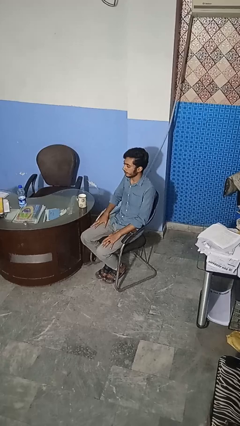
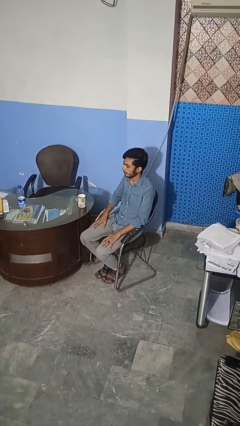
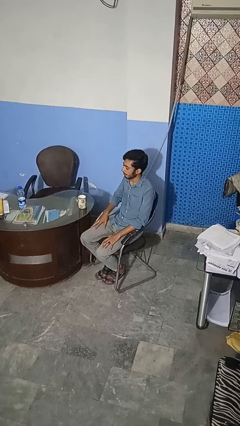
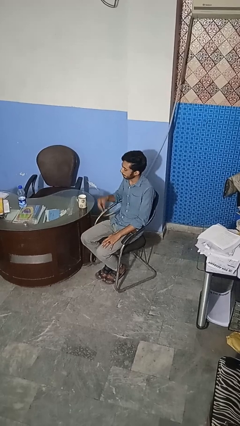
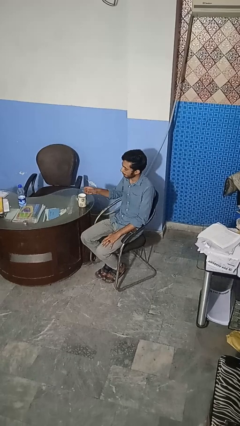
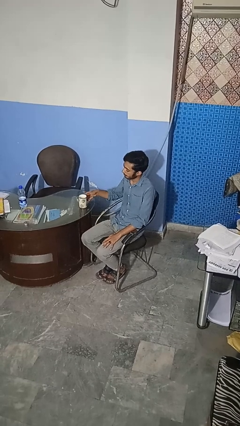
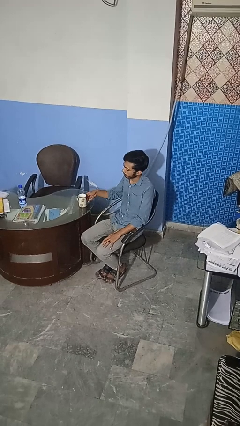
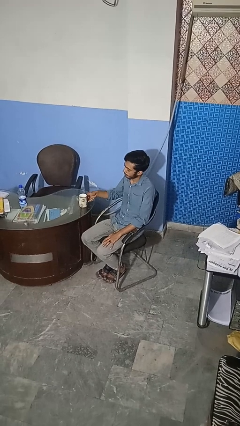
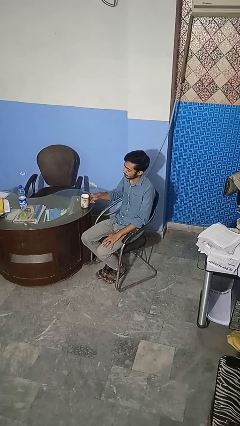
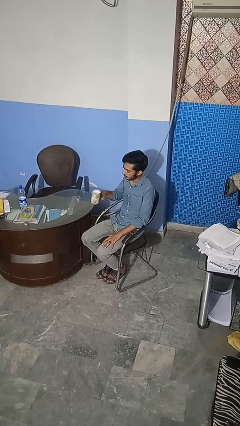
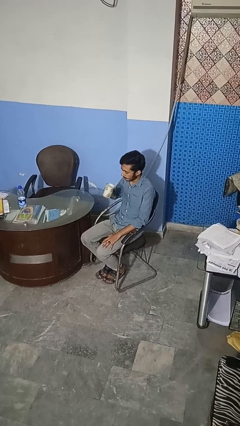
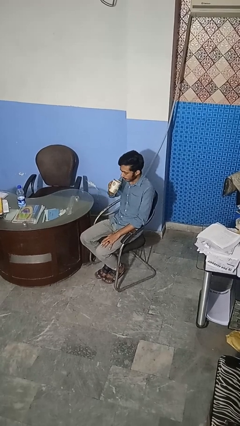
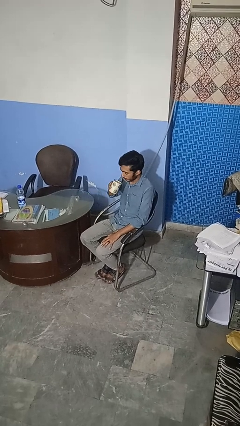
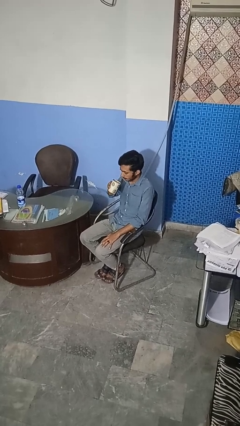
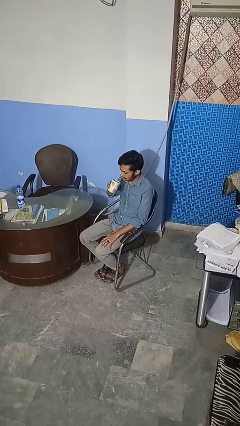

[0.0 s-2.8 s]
person picks up object from table

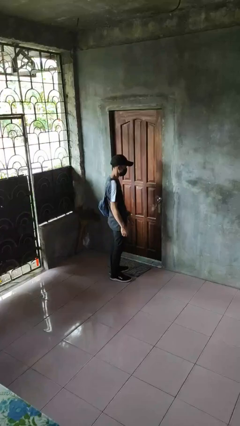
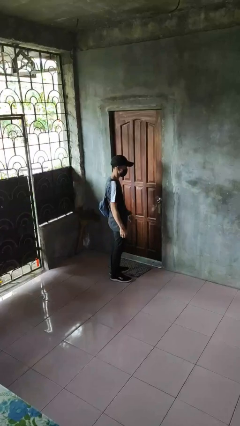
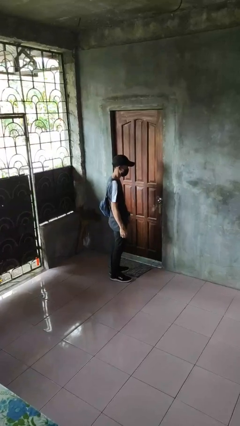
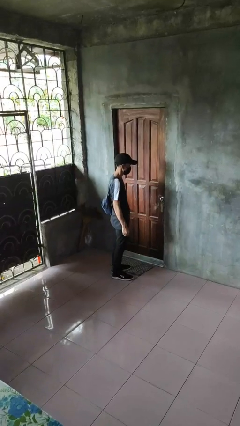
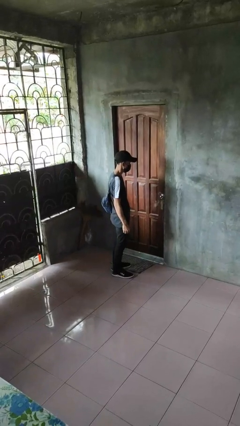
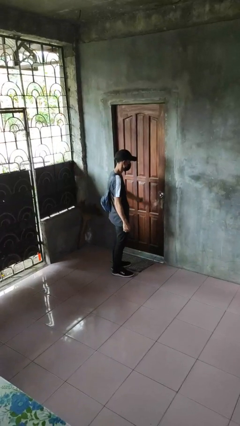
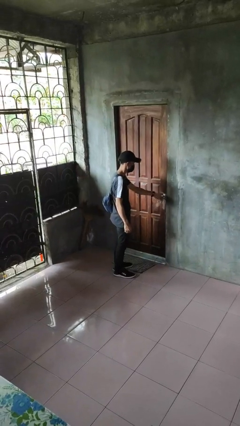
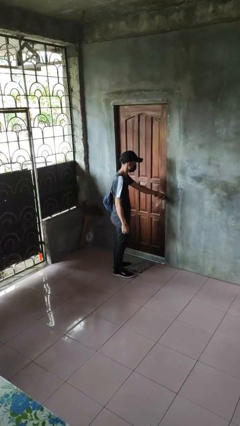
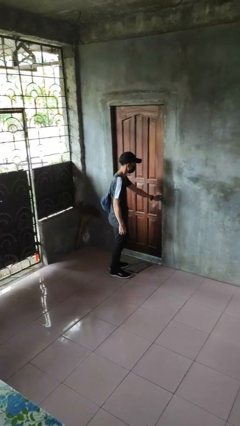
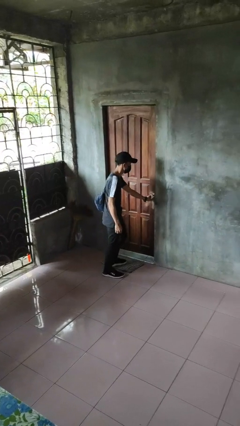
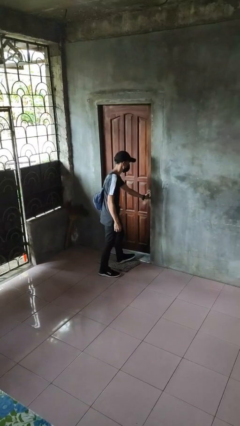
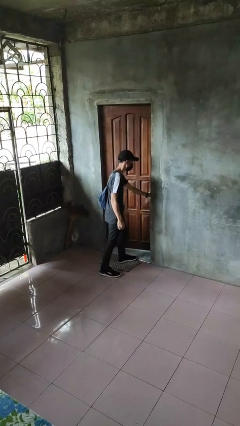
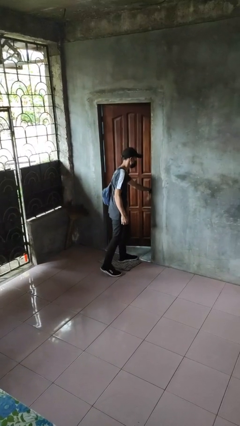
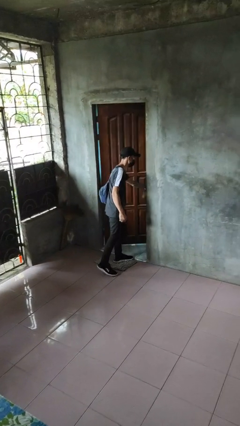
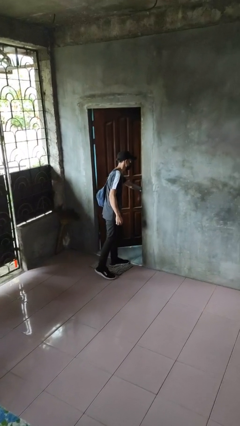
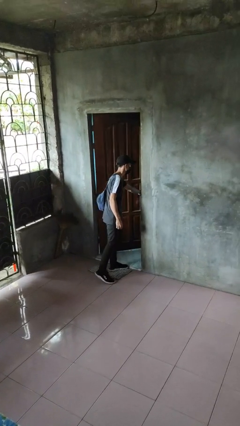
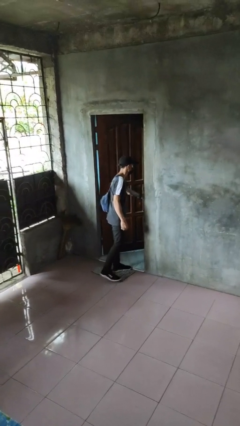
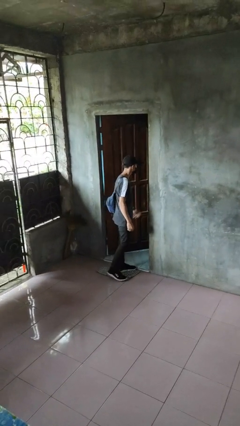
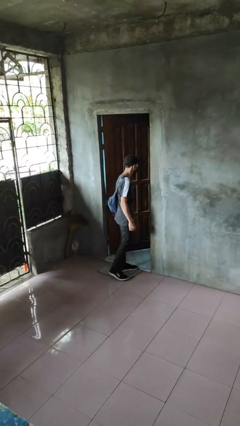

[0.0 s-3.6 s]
person opens facility door

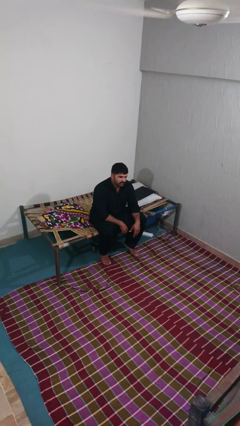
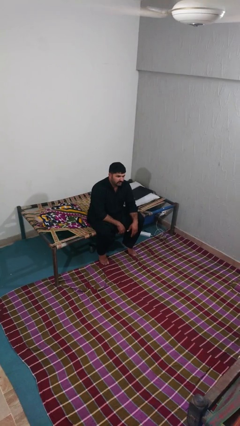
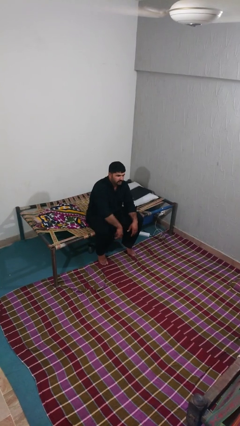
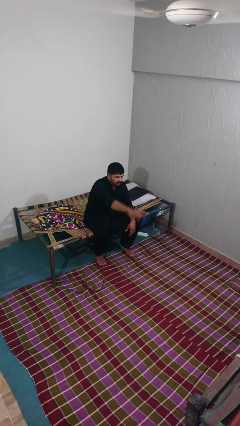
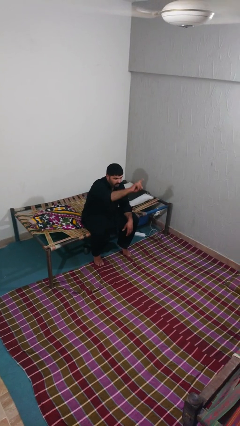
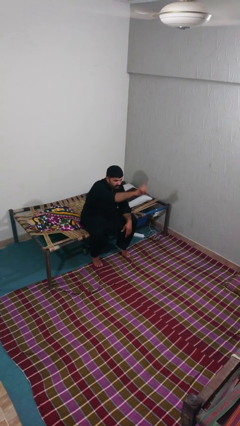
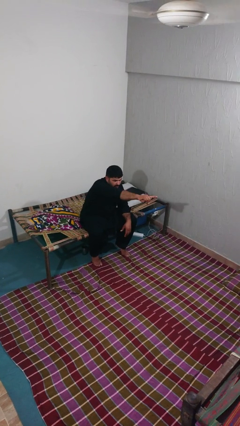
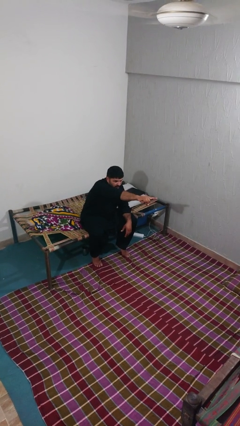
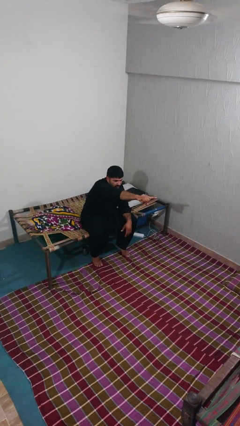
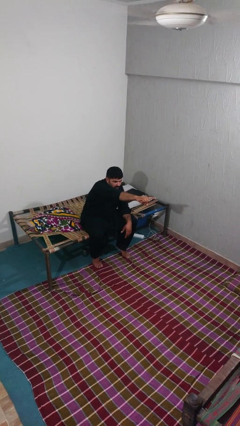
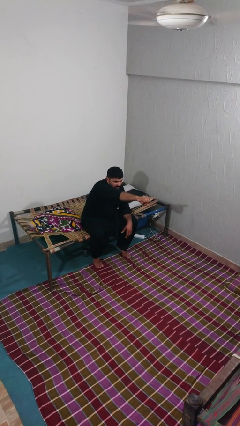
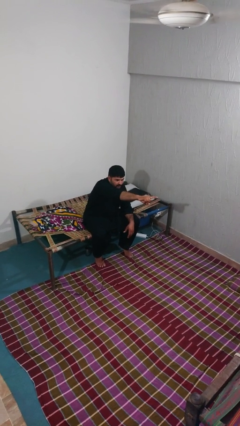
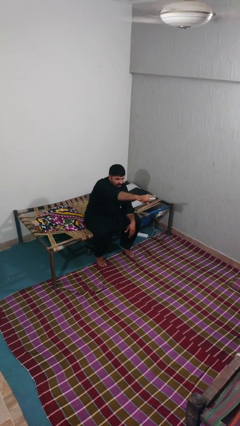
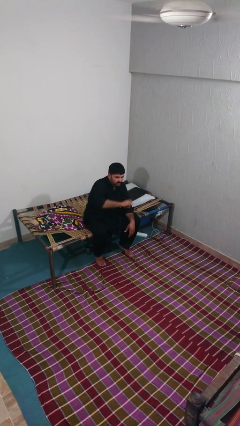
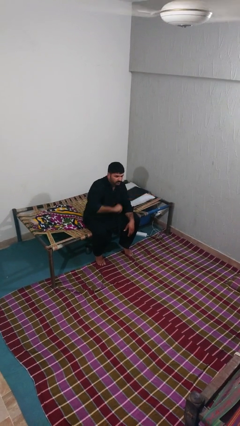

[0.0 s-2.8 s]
person points at person

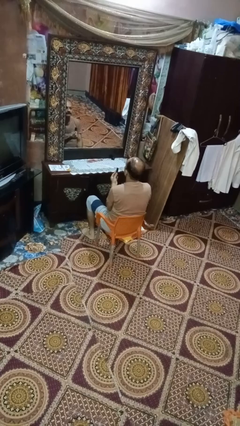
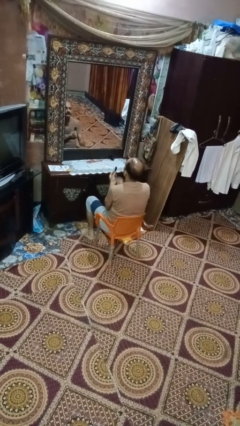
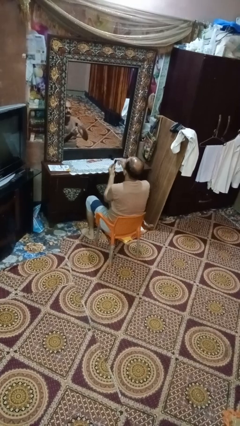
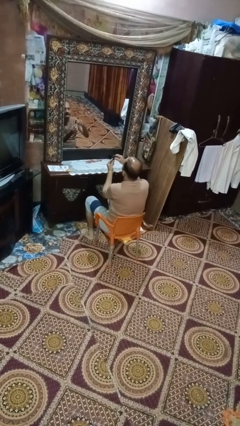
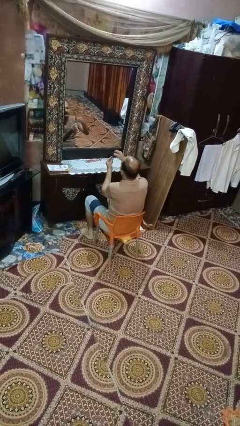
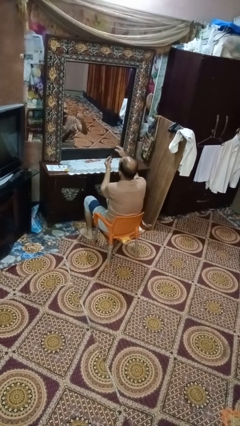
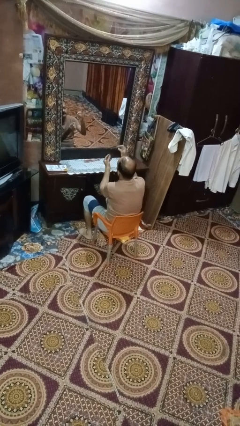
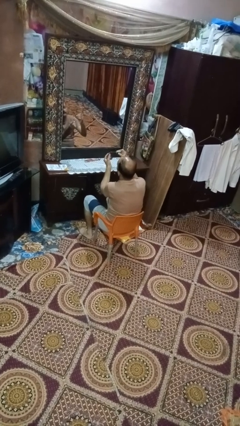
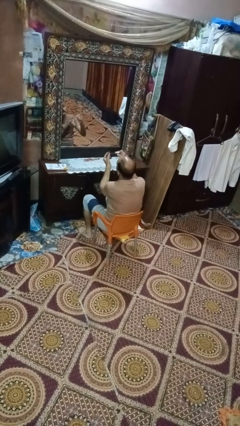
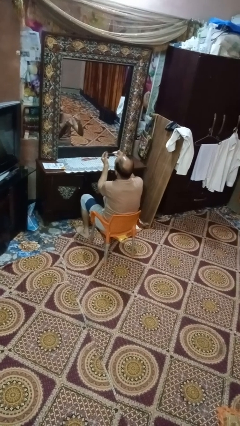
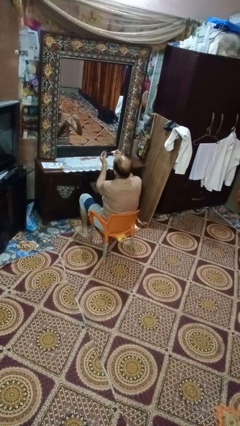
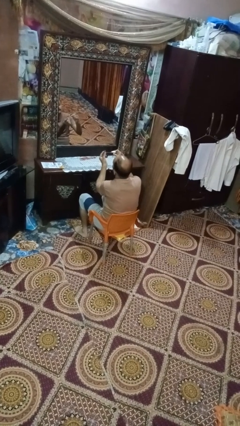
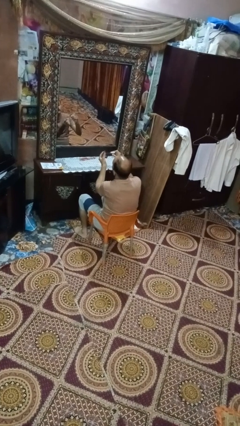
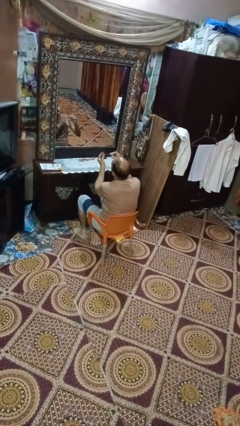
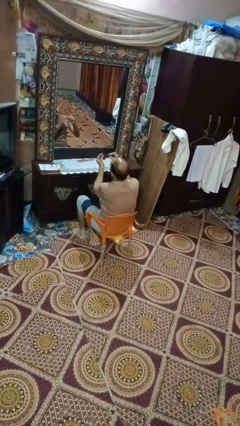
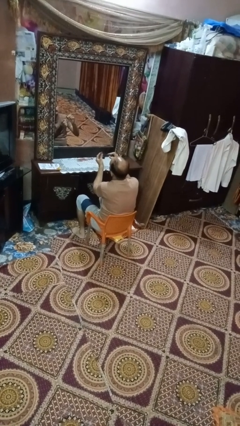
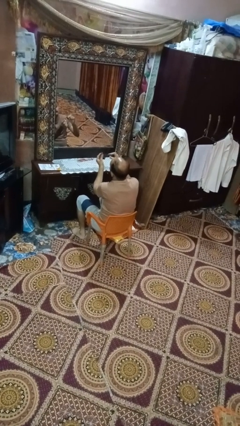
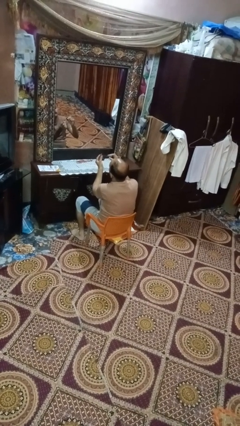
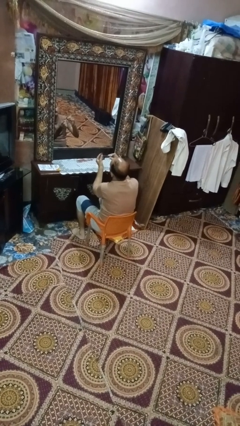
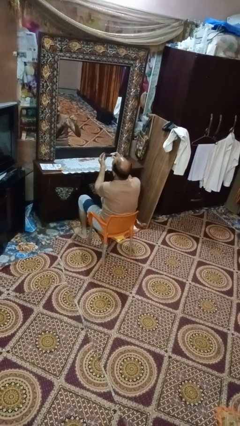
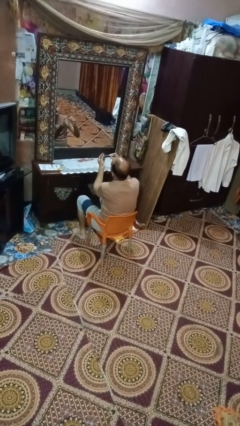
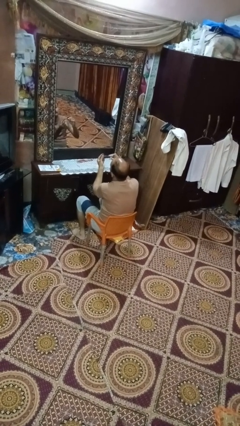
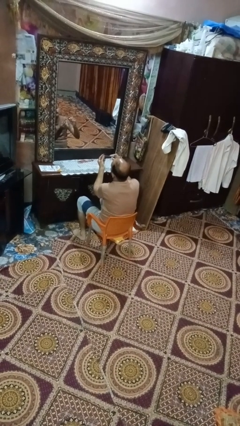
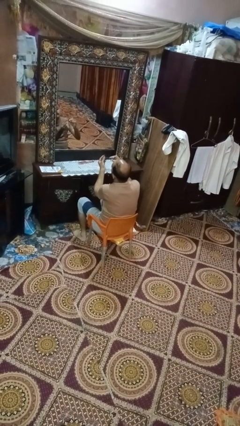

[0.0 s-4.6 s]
person paints fingernails

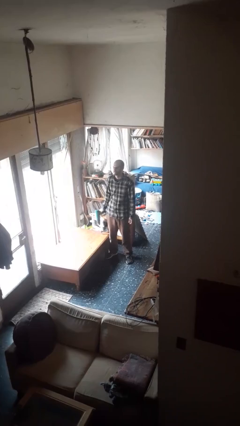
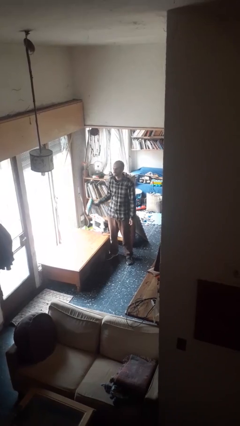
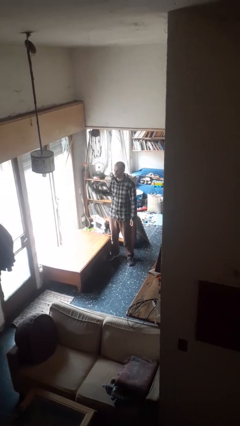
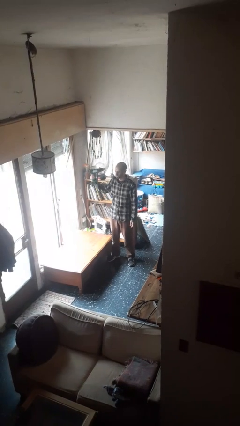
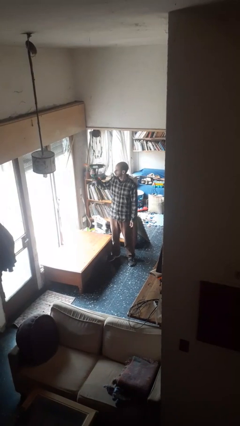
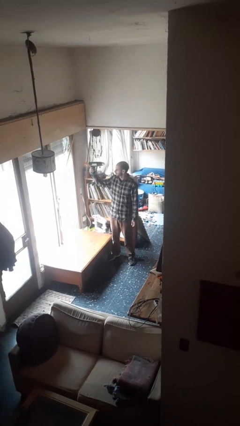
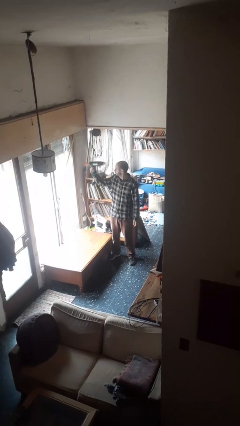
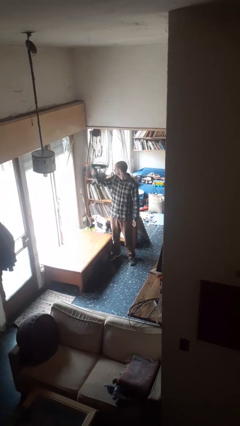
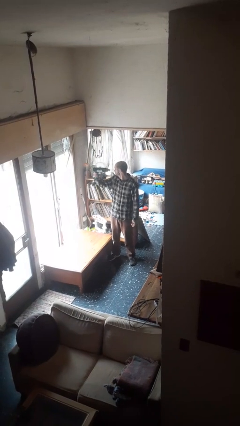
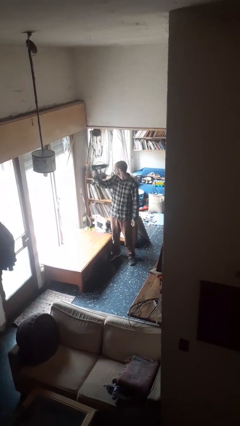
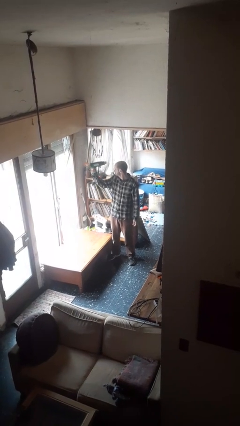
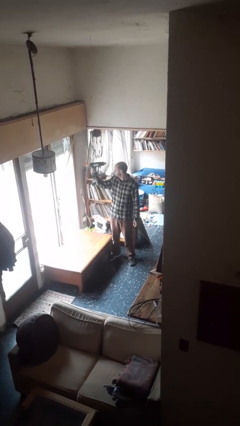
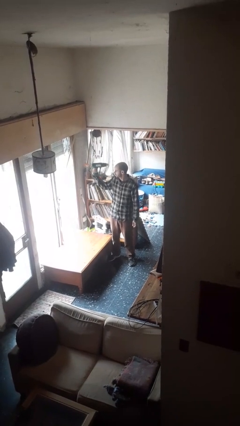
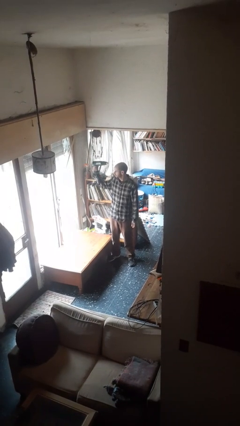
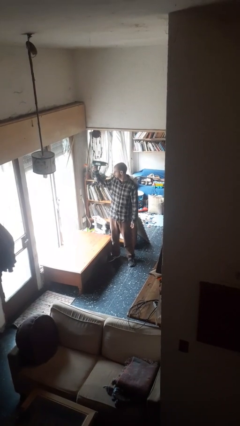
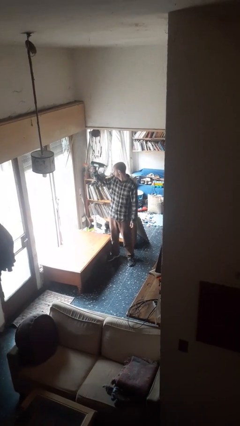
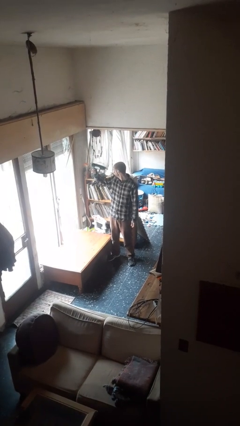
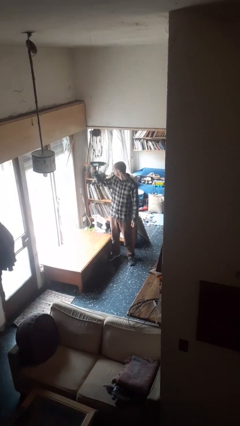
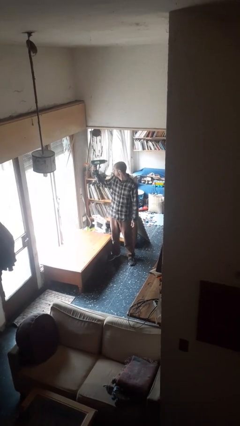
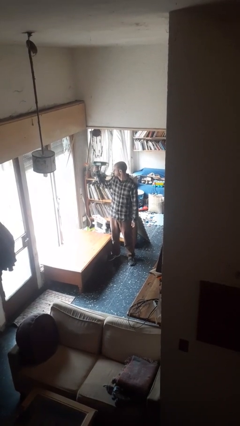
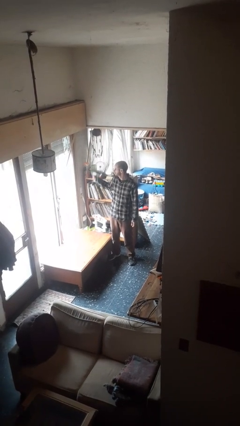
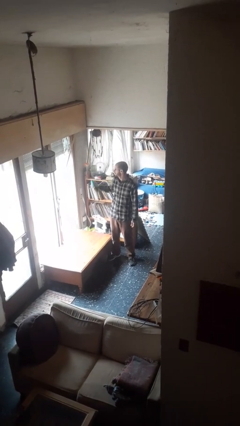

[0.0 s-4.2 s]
person dries hair with hairdryer
